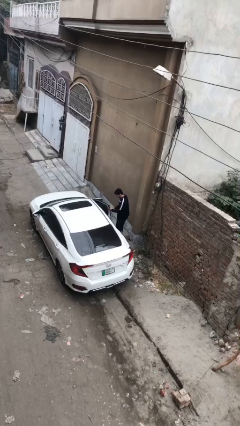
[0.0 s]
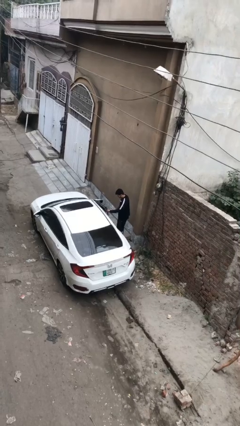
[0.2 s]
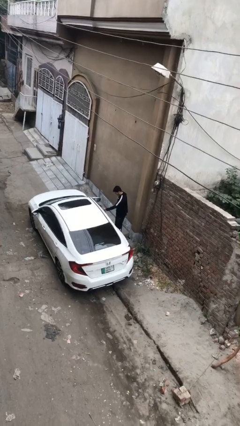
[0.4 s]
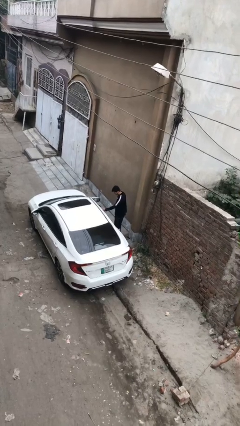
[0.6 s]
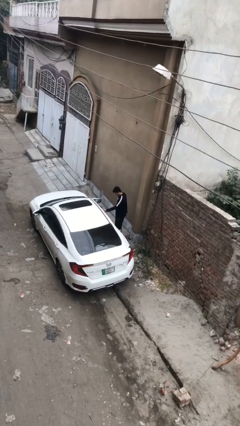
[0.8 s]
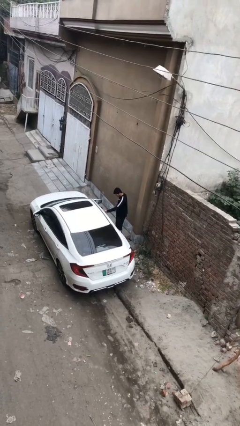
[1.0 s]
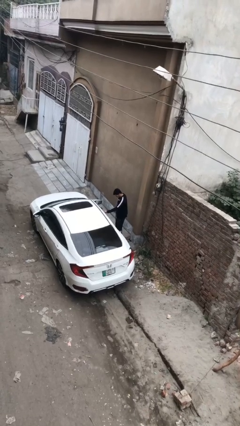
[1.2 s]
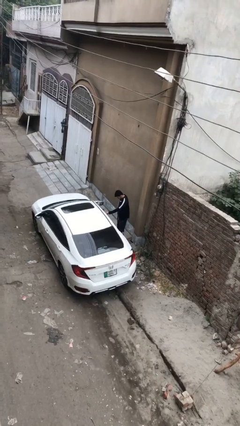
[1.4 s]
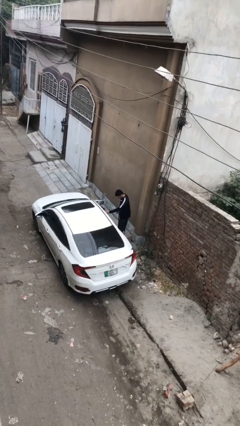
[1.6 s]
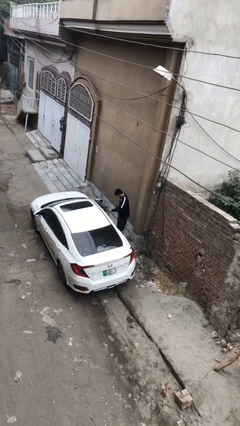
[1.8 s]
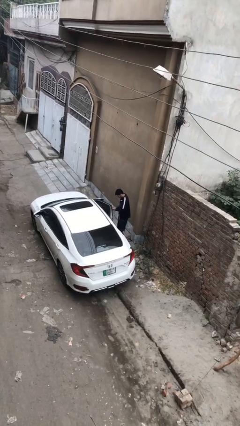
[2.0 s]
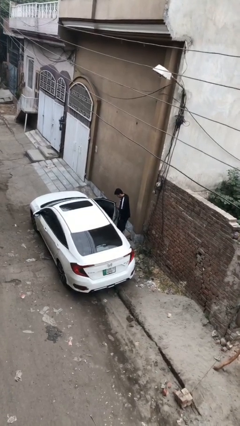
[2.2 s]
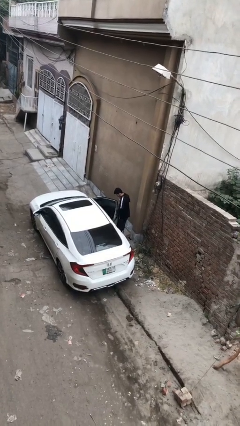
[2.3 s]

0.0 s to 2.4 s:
person closes car door

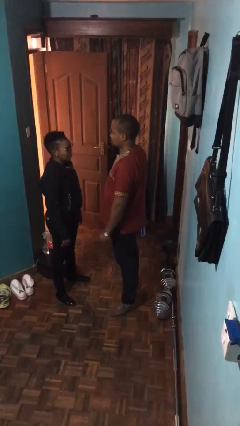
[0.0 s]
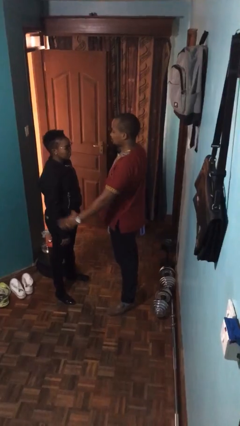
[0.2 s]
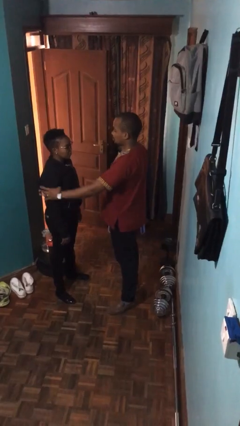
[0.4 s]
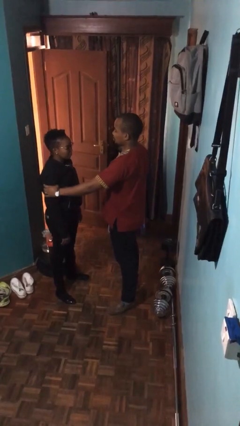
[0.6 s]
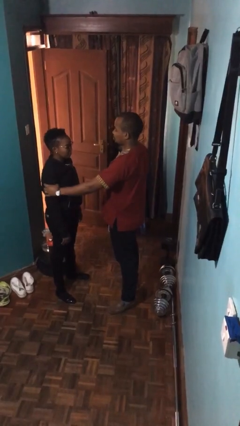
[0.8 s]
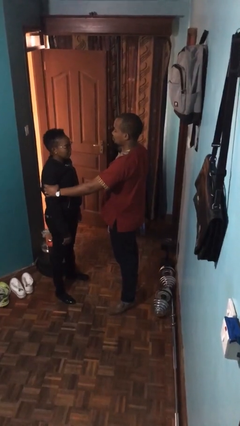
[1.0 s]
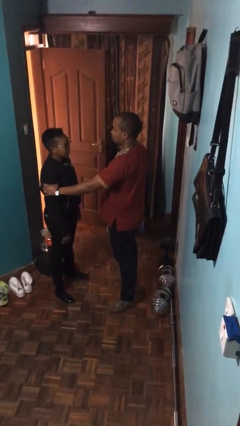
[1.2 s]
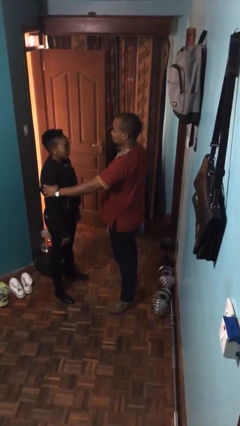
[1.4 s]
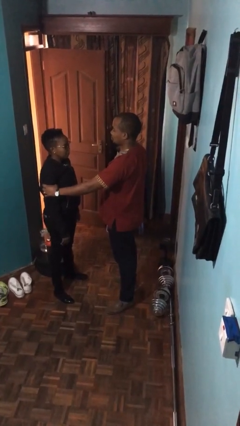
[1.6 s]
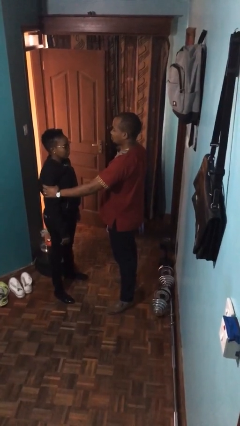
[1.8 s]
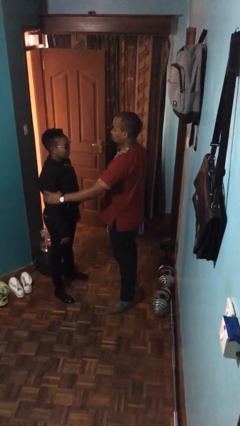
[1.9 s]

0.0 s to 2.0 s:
person grabs person by bicep

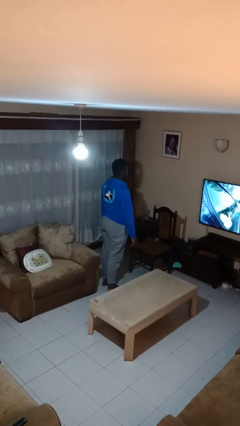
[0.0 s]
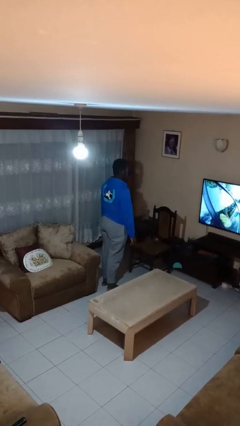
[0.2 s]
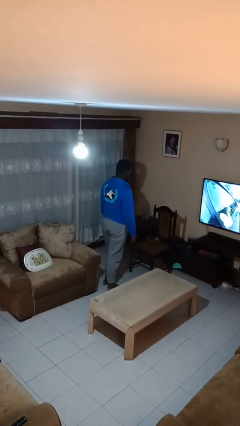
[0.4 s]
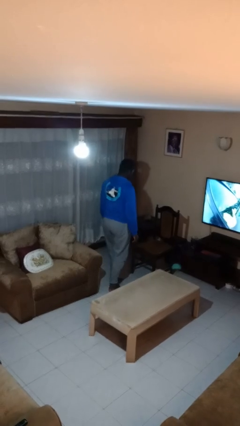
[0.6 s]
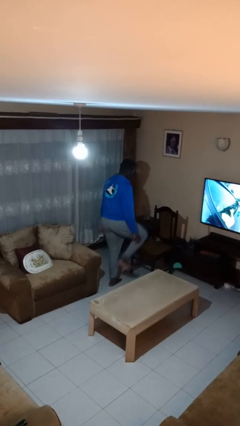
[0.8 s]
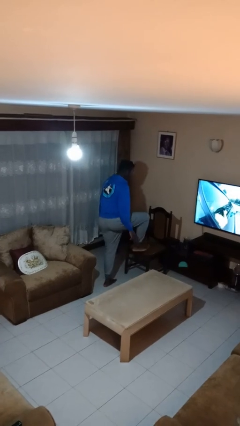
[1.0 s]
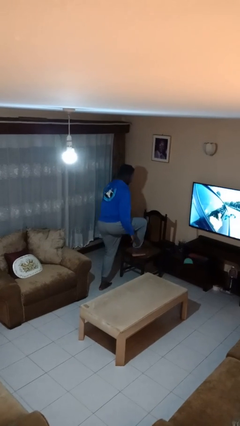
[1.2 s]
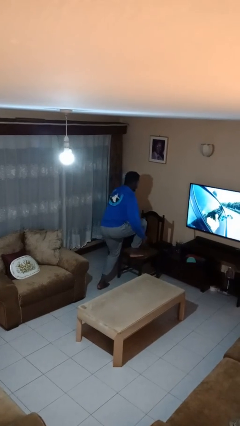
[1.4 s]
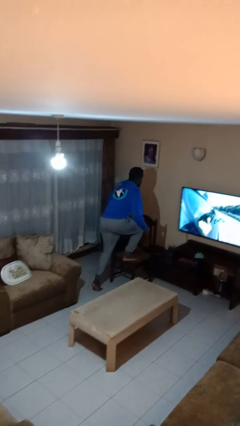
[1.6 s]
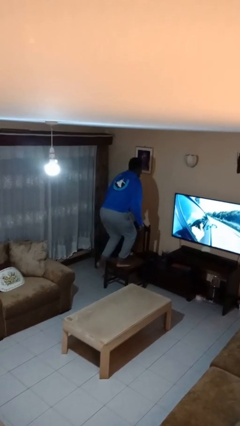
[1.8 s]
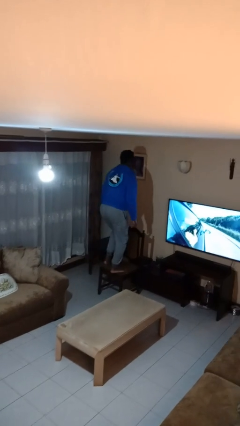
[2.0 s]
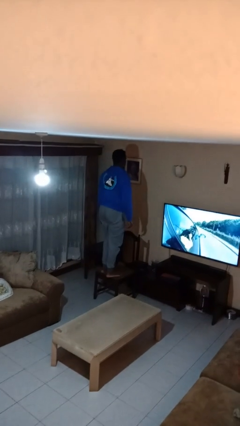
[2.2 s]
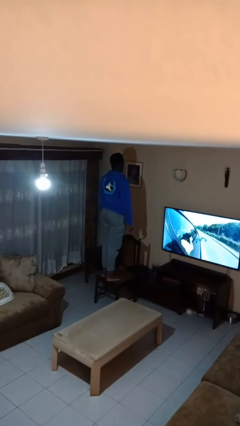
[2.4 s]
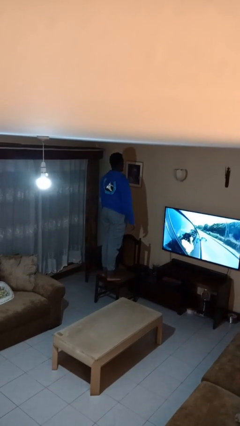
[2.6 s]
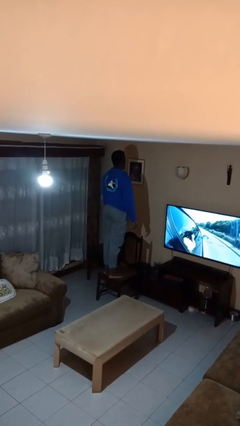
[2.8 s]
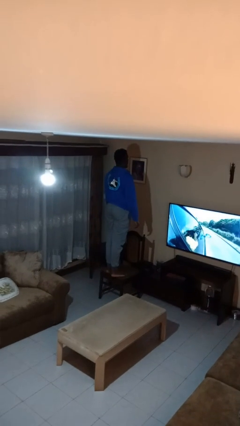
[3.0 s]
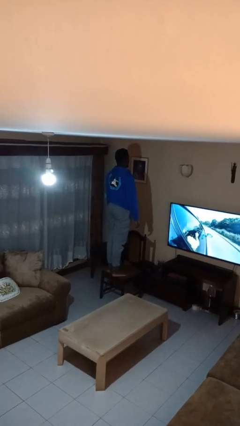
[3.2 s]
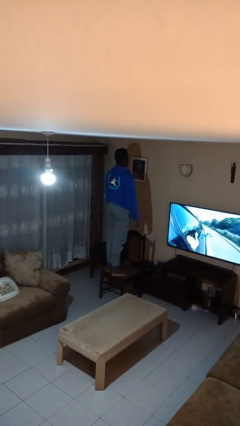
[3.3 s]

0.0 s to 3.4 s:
person climbs on chair

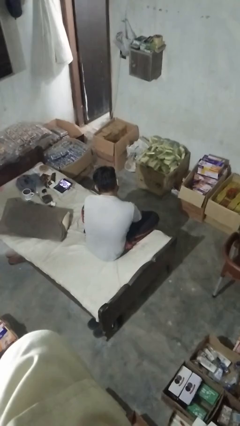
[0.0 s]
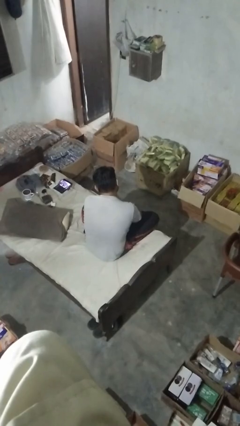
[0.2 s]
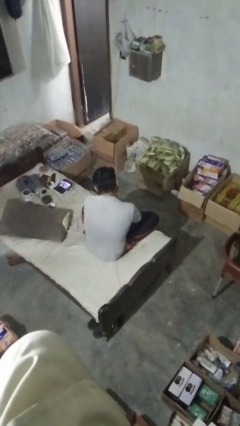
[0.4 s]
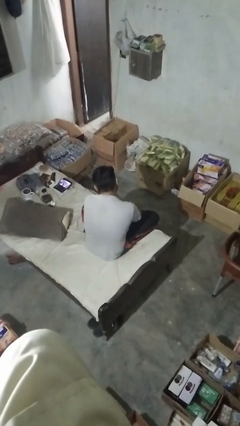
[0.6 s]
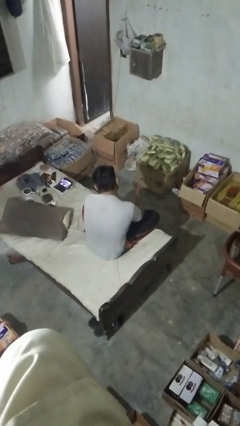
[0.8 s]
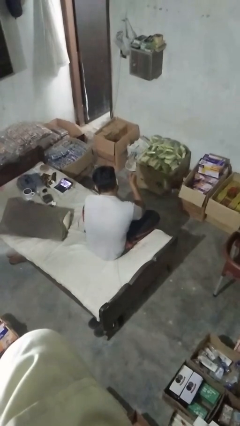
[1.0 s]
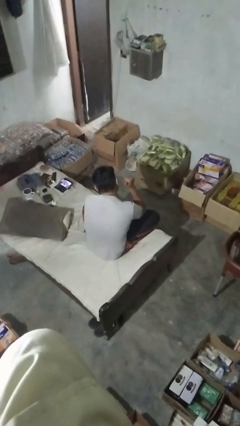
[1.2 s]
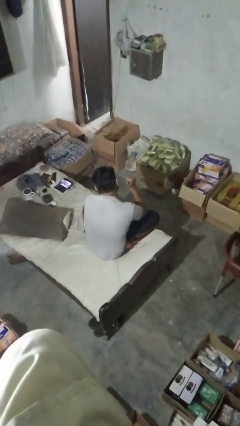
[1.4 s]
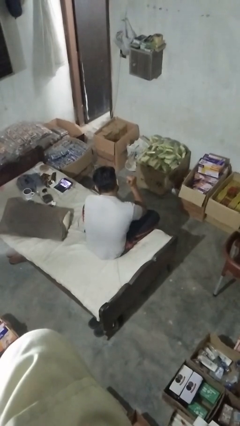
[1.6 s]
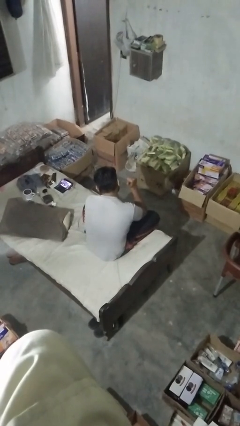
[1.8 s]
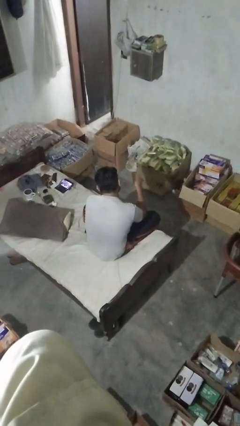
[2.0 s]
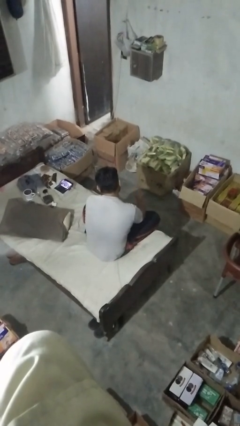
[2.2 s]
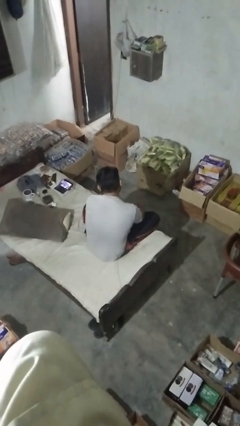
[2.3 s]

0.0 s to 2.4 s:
person gestures behind me

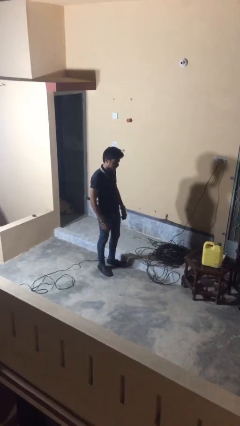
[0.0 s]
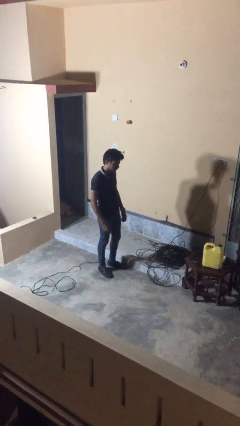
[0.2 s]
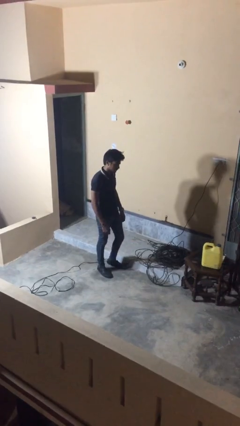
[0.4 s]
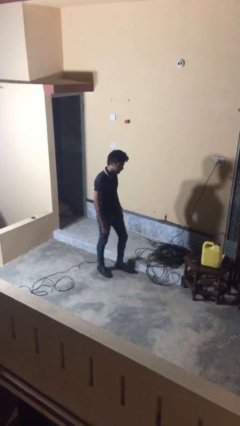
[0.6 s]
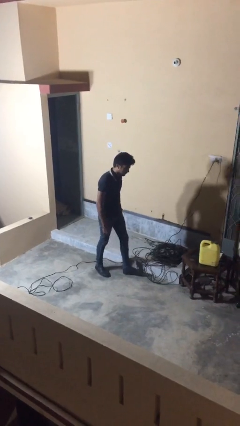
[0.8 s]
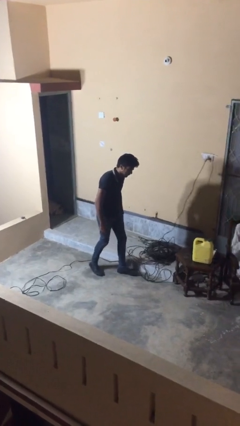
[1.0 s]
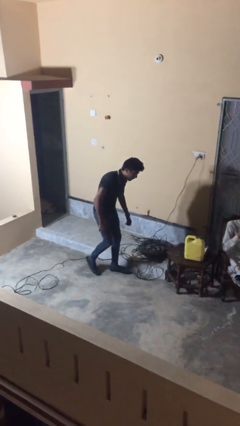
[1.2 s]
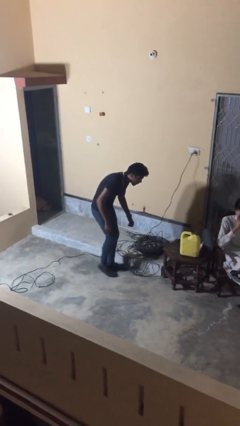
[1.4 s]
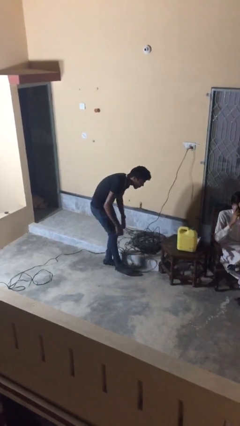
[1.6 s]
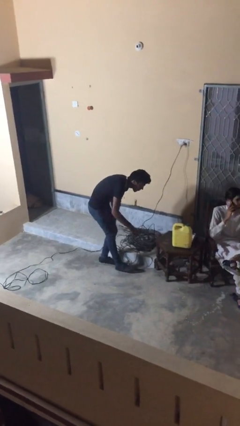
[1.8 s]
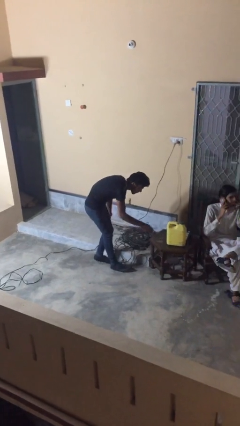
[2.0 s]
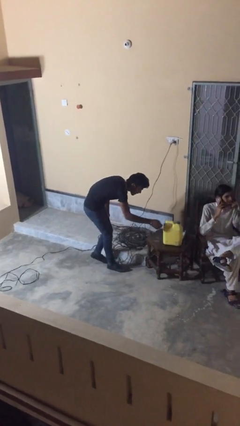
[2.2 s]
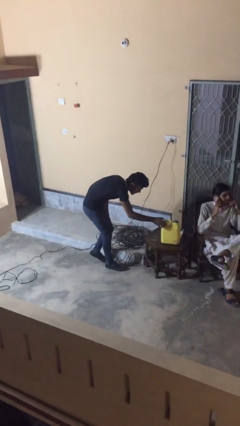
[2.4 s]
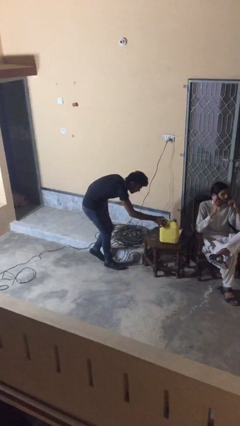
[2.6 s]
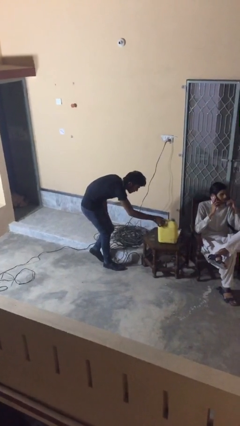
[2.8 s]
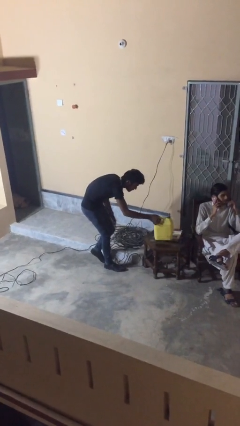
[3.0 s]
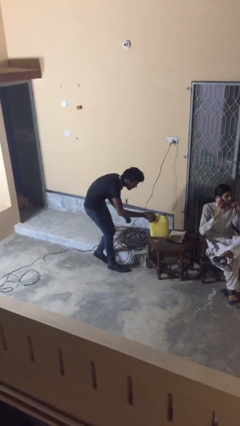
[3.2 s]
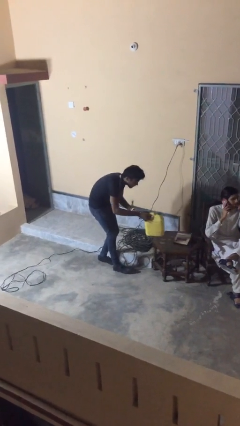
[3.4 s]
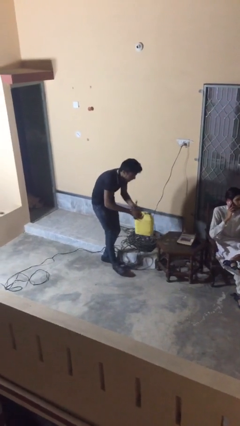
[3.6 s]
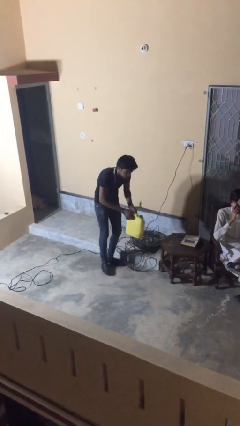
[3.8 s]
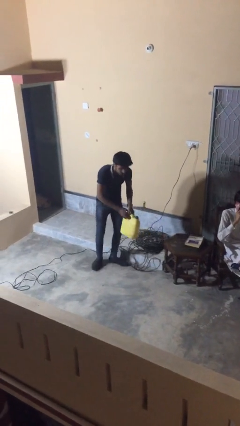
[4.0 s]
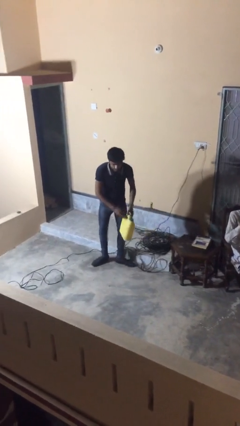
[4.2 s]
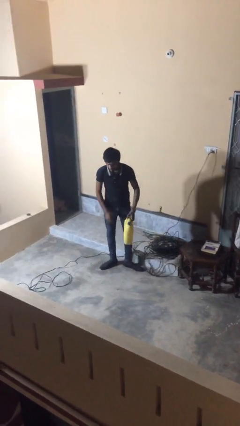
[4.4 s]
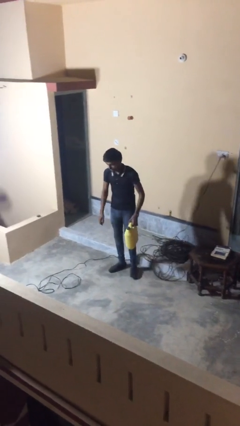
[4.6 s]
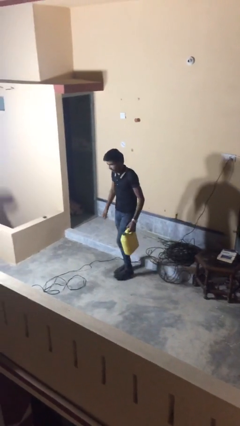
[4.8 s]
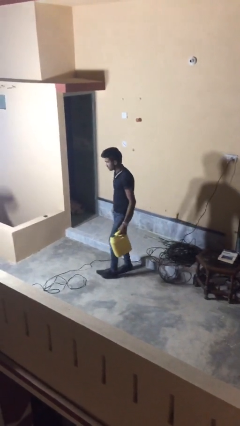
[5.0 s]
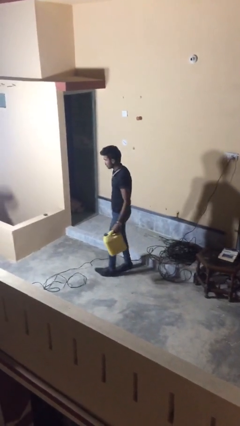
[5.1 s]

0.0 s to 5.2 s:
person steals object from person

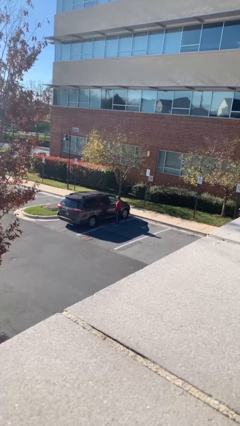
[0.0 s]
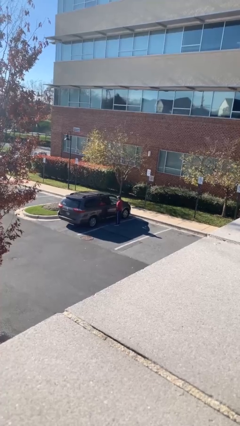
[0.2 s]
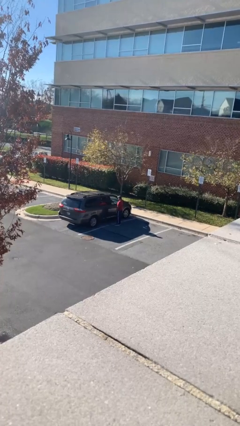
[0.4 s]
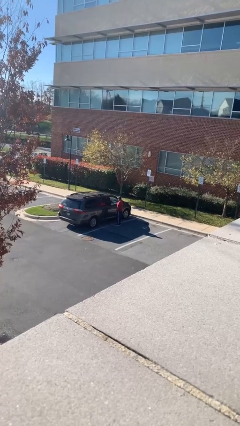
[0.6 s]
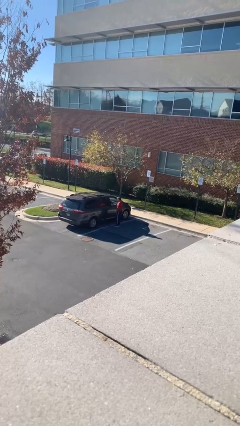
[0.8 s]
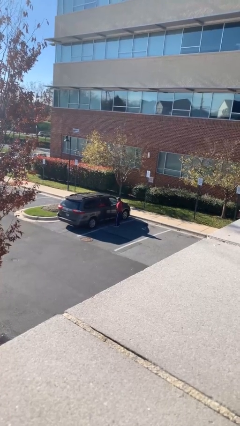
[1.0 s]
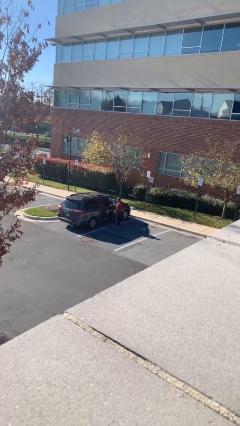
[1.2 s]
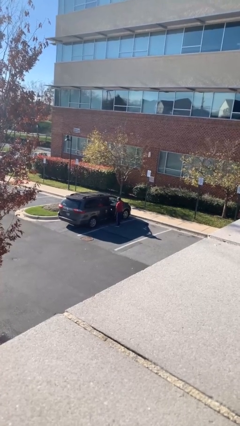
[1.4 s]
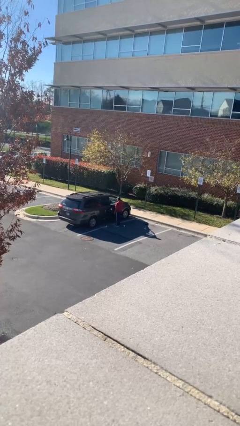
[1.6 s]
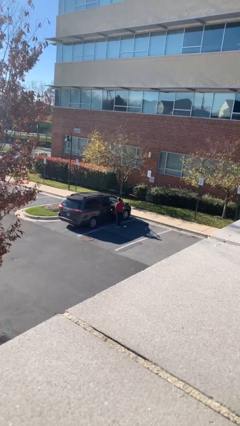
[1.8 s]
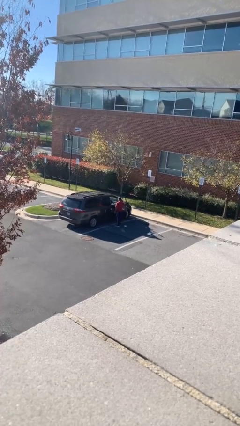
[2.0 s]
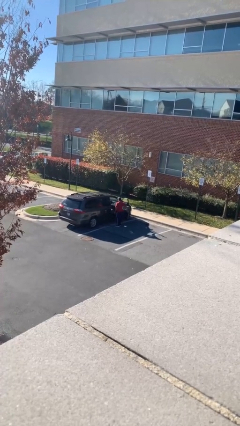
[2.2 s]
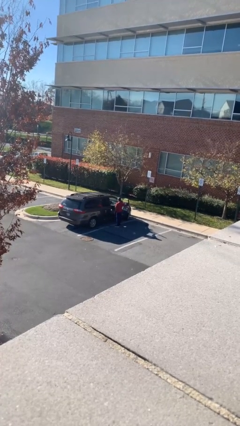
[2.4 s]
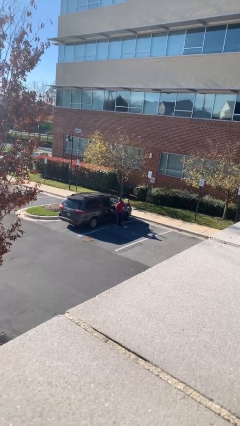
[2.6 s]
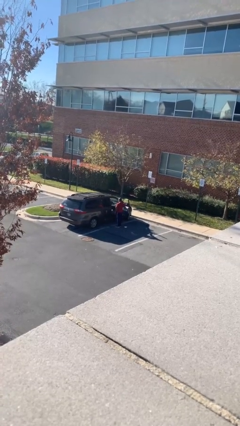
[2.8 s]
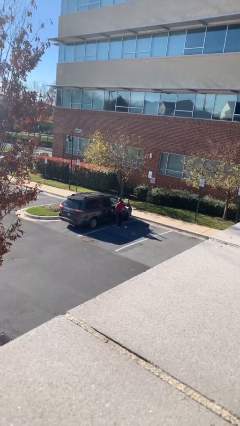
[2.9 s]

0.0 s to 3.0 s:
person opens car door
